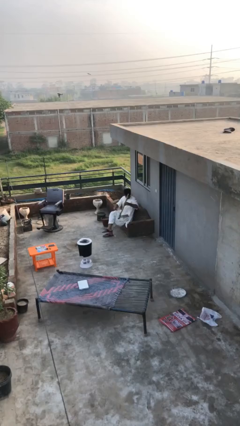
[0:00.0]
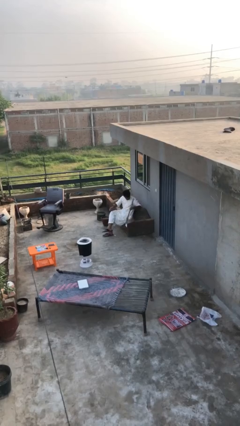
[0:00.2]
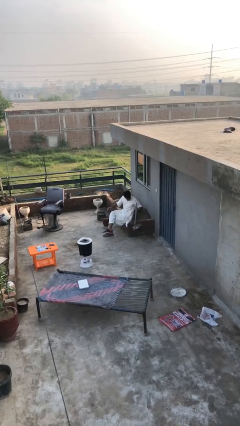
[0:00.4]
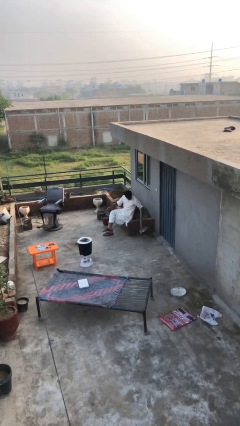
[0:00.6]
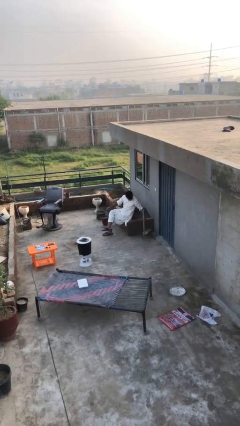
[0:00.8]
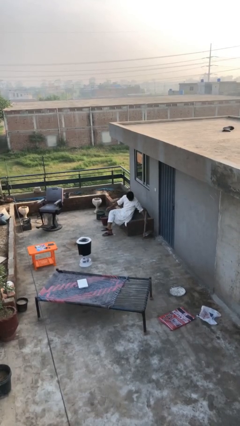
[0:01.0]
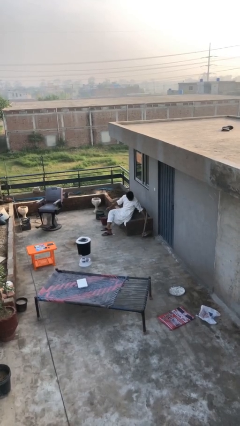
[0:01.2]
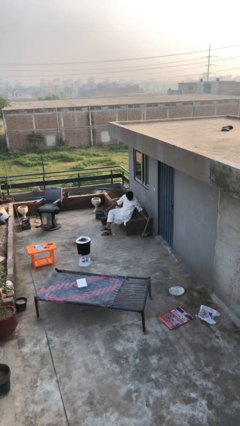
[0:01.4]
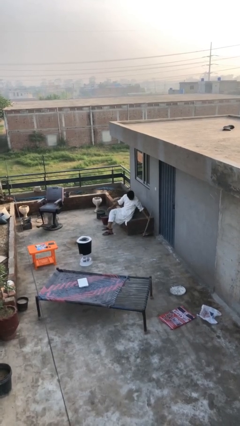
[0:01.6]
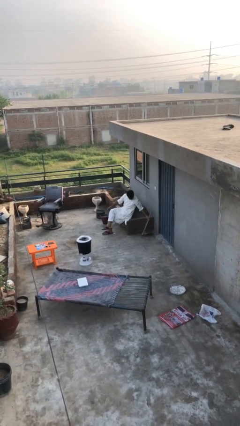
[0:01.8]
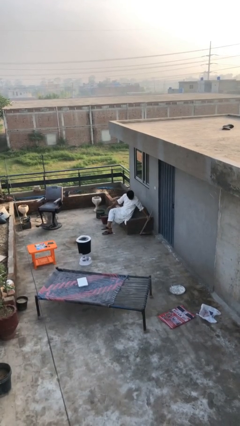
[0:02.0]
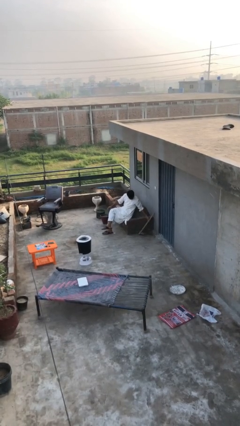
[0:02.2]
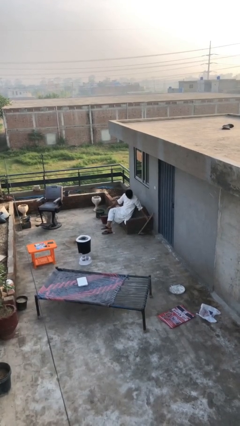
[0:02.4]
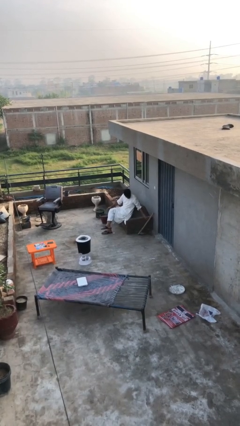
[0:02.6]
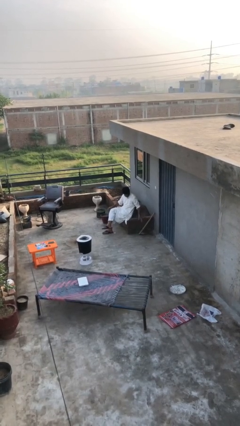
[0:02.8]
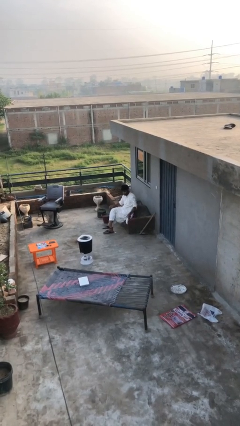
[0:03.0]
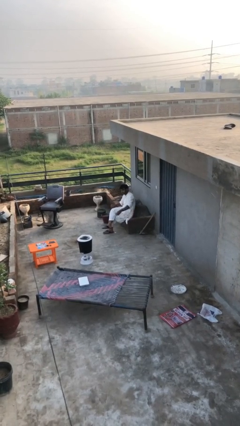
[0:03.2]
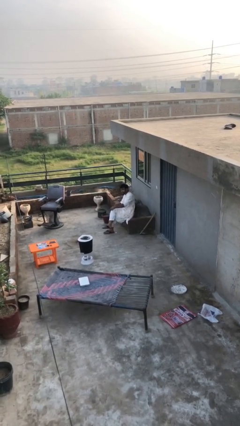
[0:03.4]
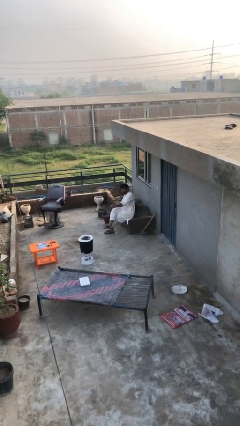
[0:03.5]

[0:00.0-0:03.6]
person puts down object on floor

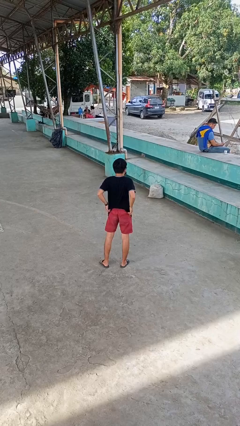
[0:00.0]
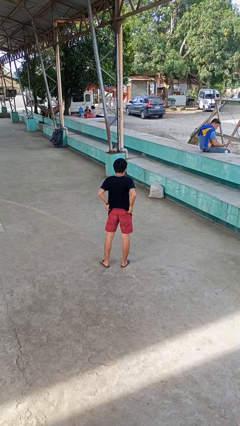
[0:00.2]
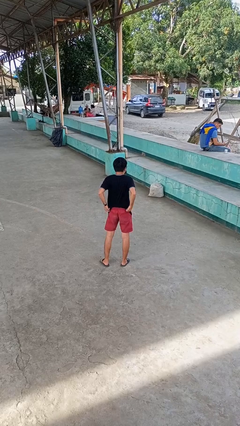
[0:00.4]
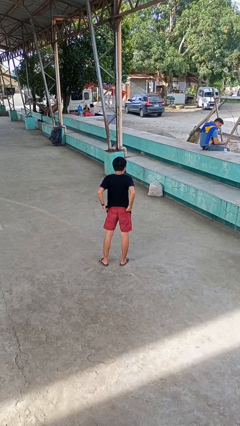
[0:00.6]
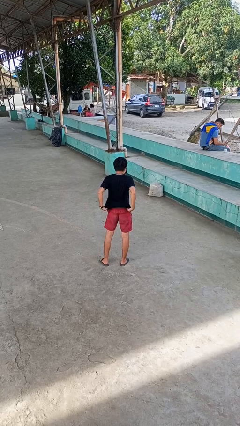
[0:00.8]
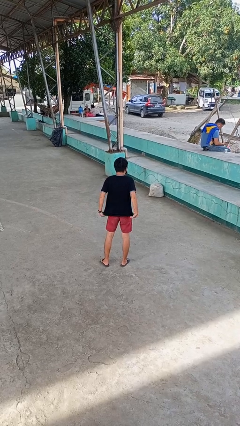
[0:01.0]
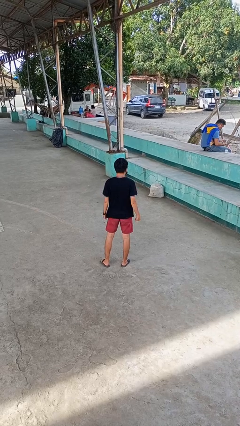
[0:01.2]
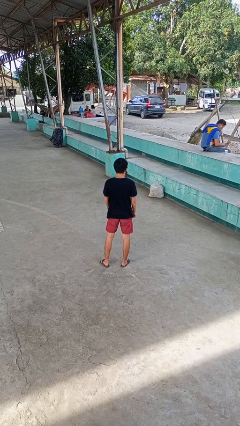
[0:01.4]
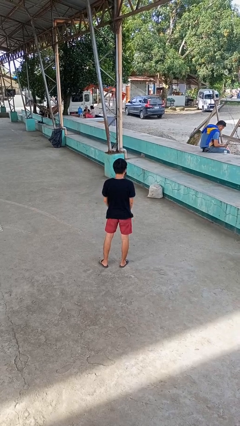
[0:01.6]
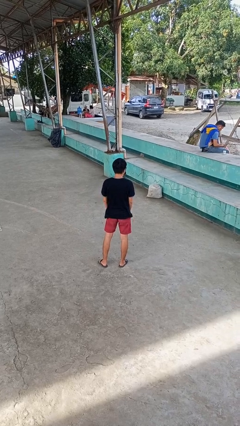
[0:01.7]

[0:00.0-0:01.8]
person untucks shirt

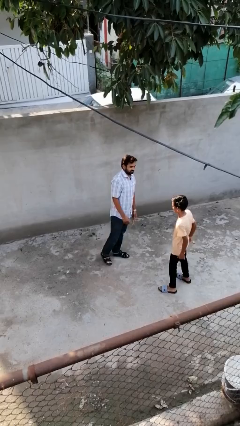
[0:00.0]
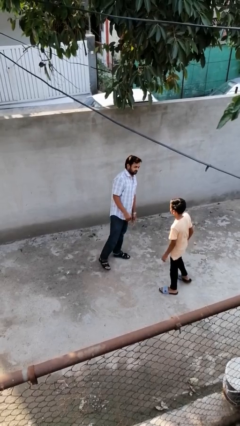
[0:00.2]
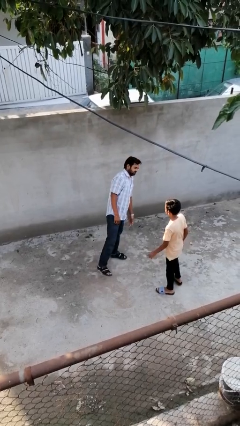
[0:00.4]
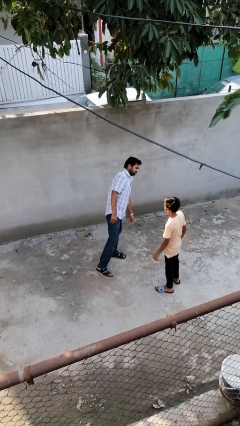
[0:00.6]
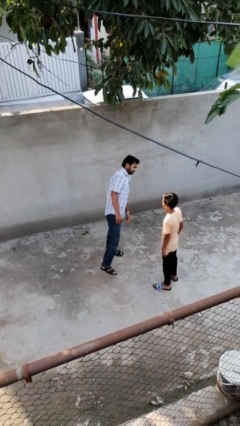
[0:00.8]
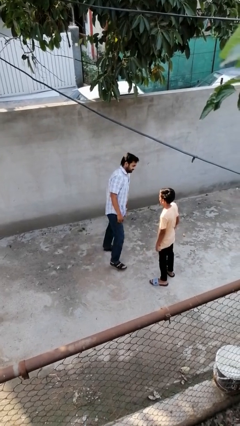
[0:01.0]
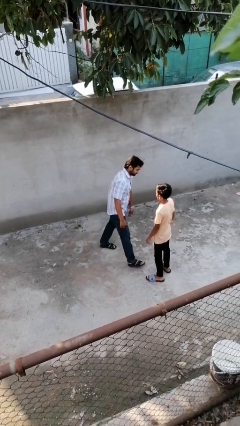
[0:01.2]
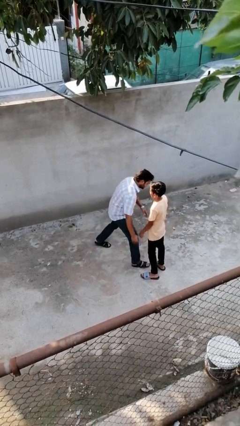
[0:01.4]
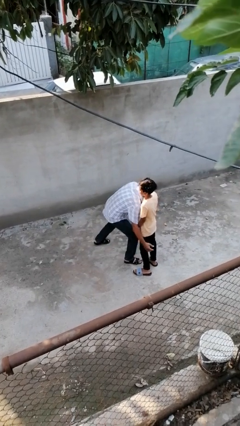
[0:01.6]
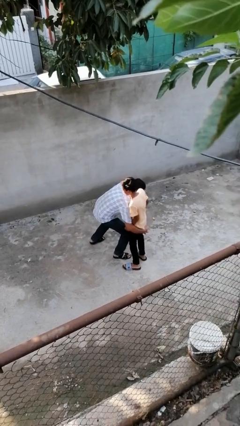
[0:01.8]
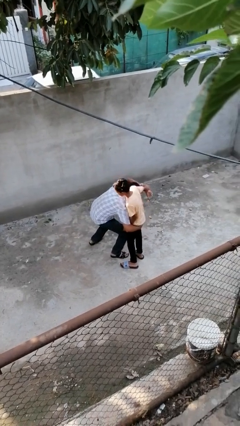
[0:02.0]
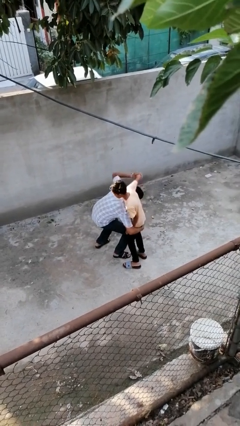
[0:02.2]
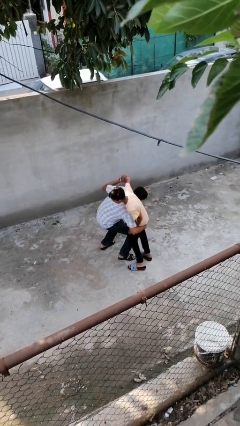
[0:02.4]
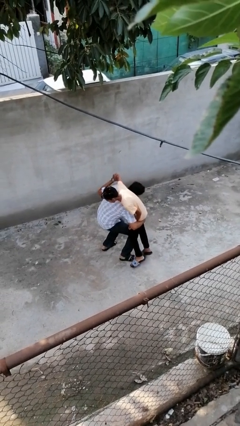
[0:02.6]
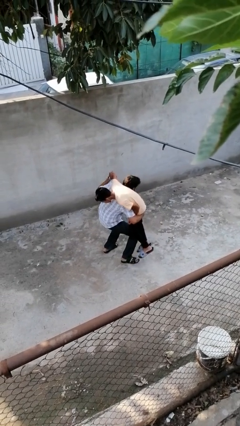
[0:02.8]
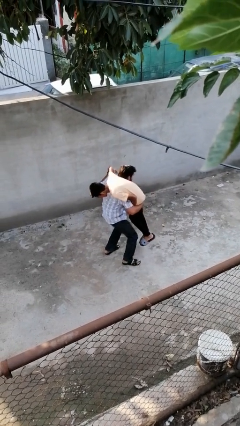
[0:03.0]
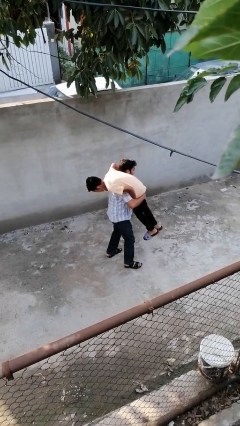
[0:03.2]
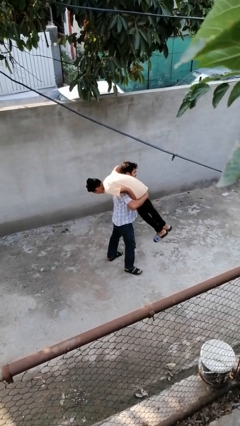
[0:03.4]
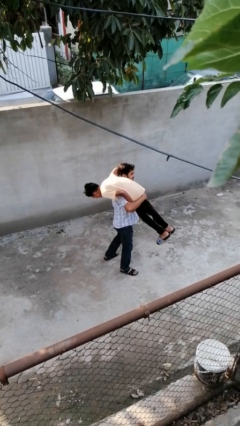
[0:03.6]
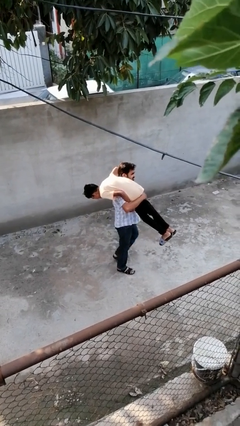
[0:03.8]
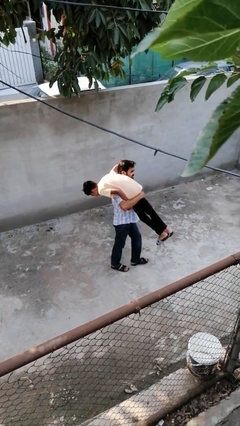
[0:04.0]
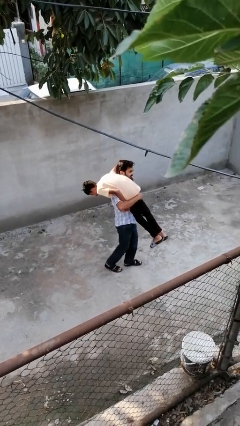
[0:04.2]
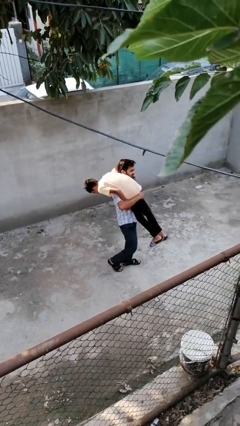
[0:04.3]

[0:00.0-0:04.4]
person carries person over shoulder

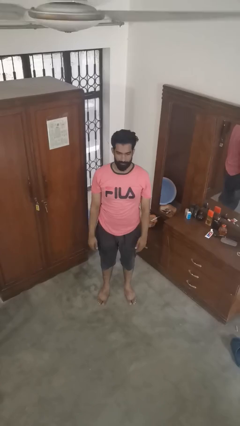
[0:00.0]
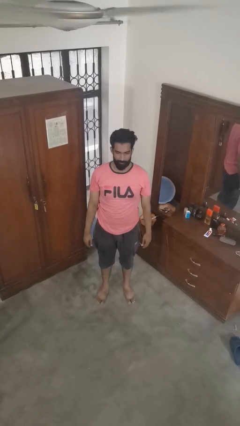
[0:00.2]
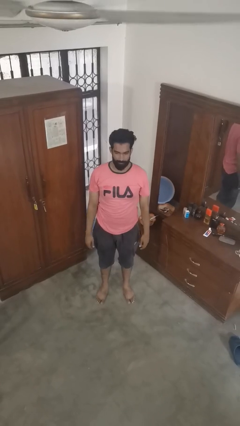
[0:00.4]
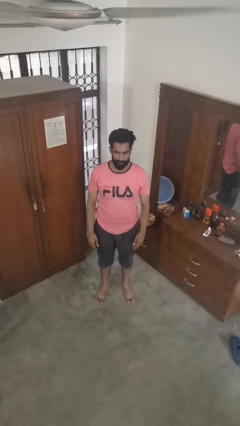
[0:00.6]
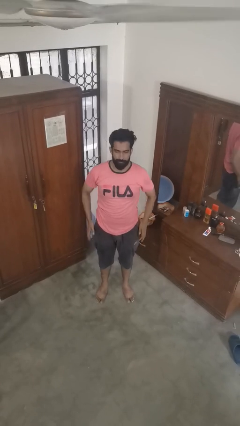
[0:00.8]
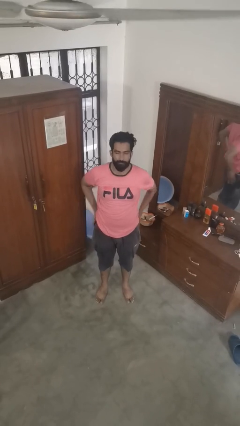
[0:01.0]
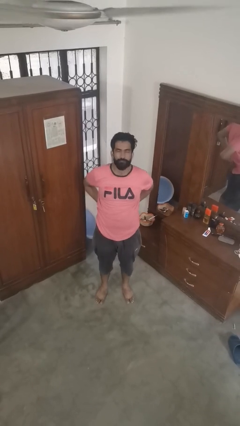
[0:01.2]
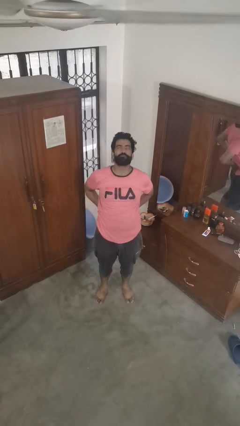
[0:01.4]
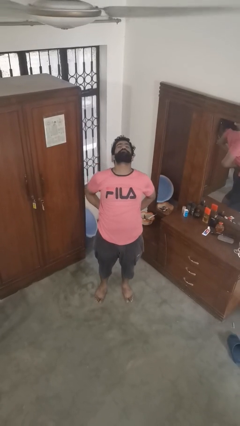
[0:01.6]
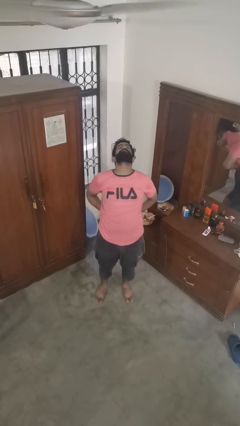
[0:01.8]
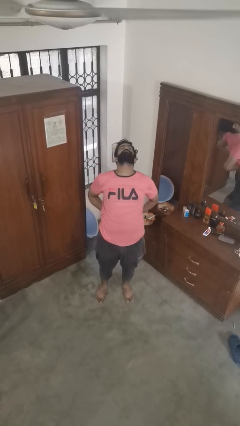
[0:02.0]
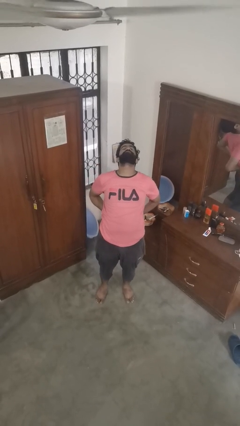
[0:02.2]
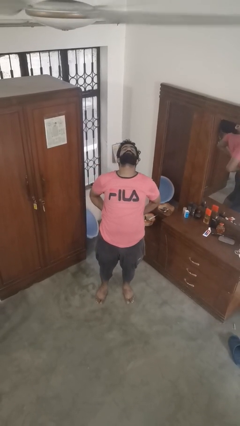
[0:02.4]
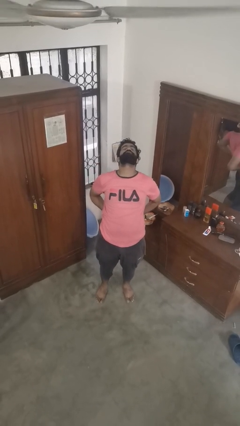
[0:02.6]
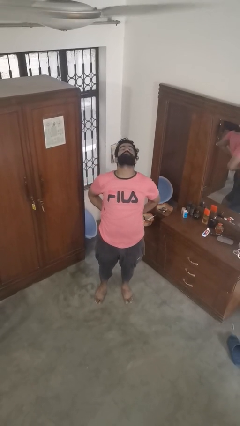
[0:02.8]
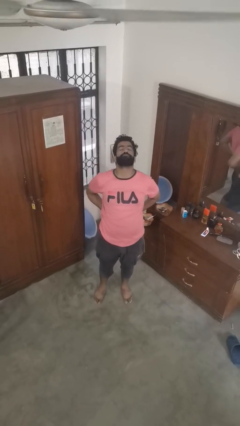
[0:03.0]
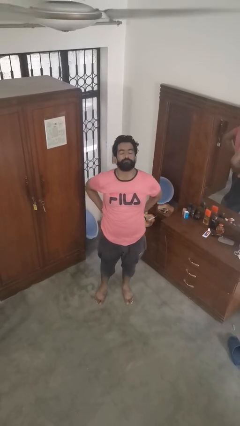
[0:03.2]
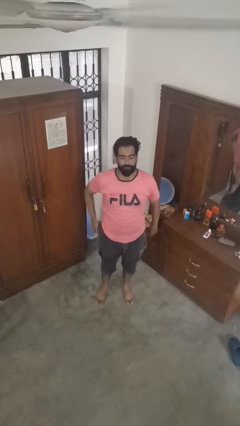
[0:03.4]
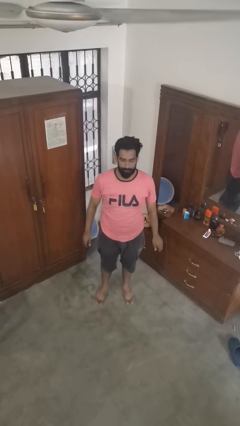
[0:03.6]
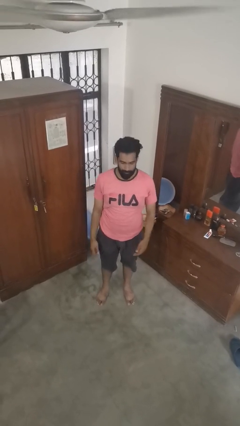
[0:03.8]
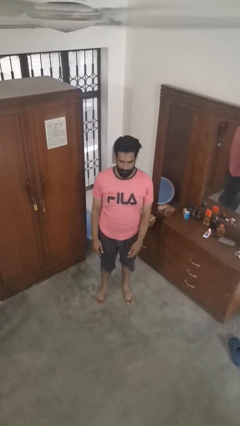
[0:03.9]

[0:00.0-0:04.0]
person stretches back

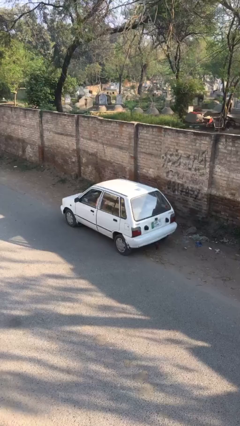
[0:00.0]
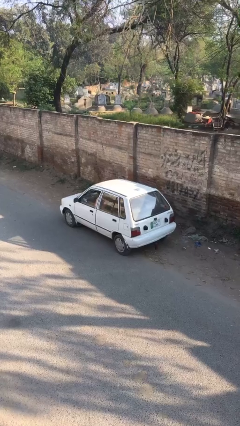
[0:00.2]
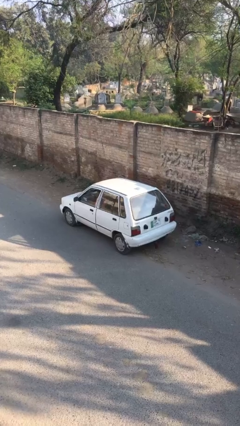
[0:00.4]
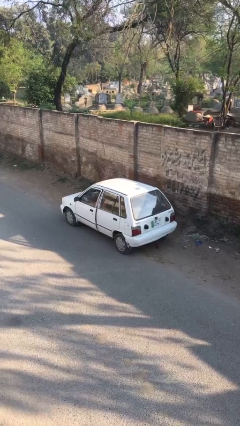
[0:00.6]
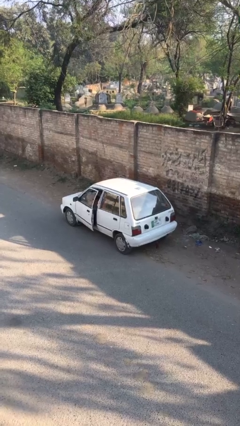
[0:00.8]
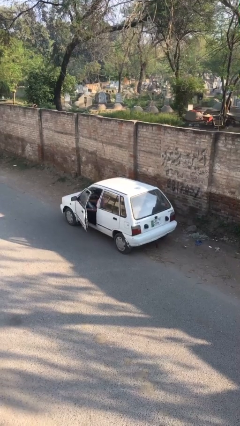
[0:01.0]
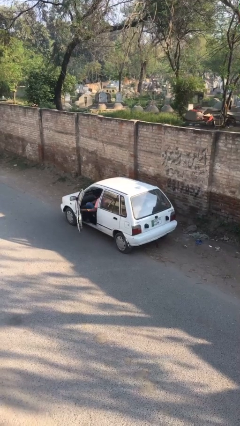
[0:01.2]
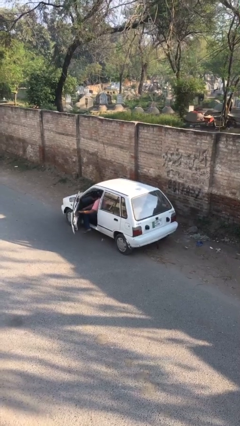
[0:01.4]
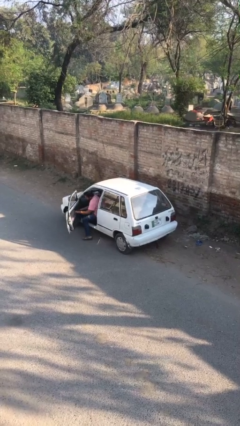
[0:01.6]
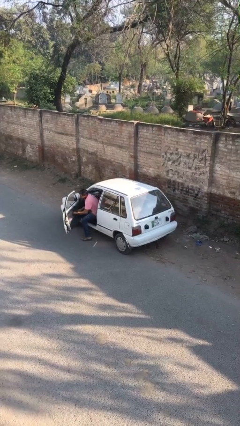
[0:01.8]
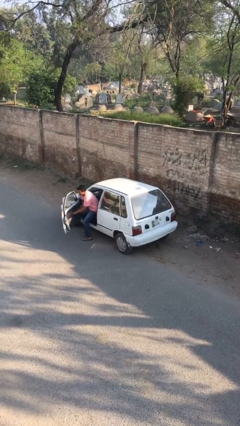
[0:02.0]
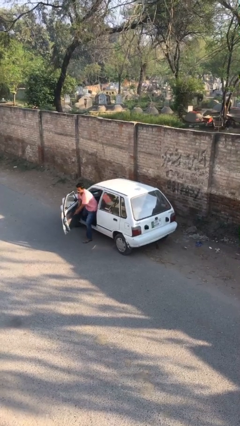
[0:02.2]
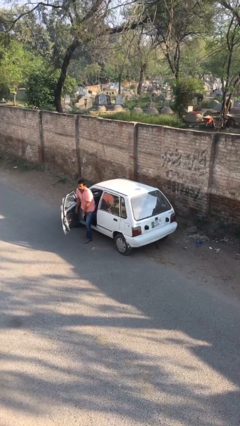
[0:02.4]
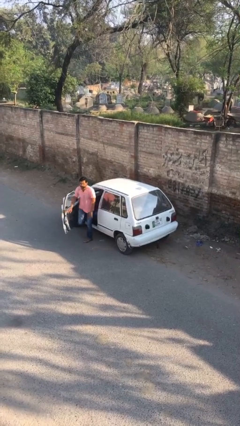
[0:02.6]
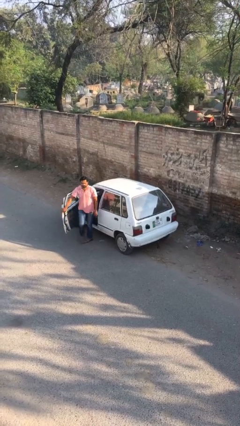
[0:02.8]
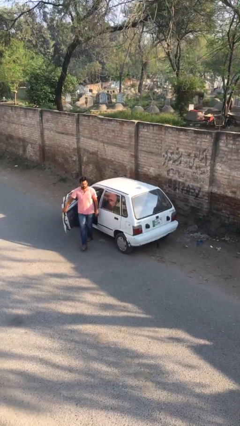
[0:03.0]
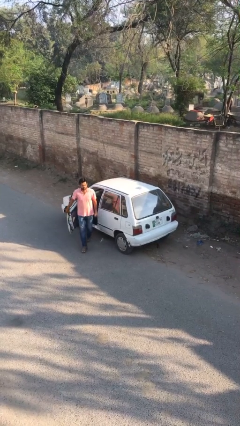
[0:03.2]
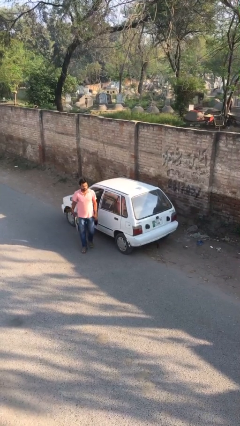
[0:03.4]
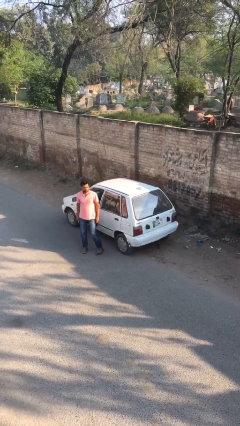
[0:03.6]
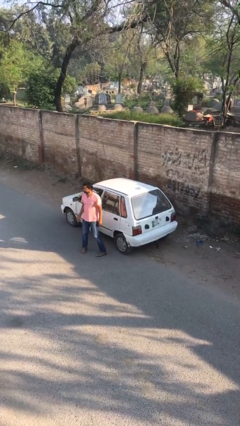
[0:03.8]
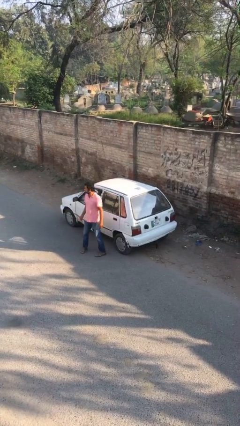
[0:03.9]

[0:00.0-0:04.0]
car drops off person
